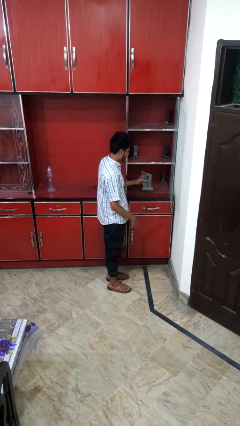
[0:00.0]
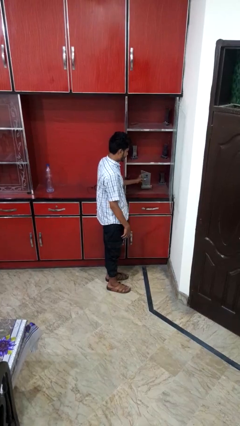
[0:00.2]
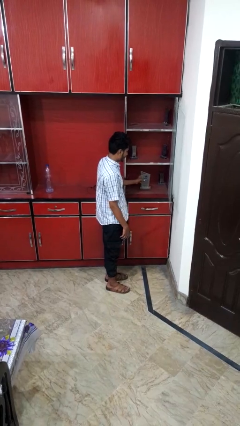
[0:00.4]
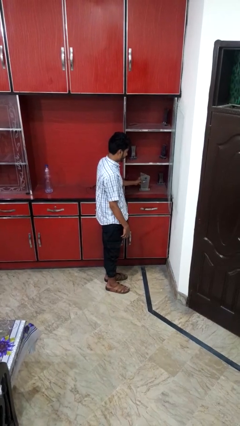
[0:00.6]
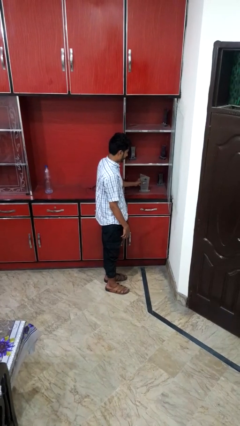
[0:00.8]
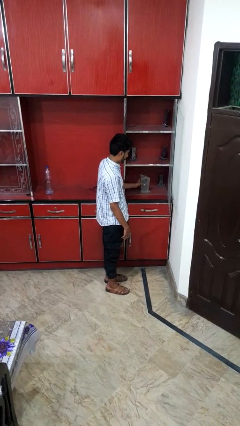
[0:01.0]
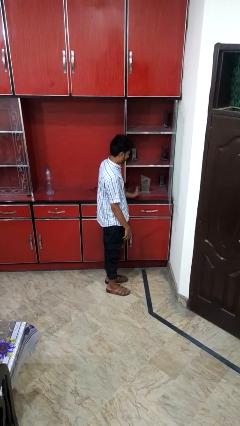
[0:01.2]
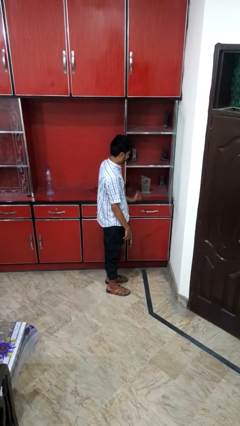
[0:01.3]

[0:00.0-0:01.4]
person puts down object into cabinet

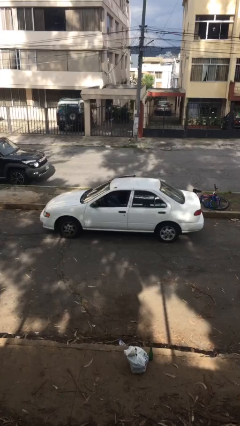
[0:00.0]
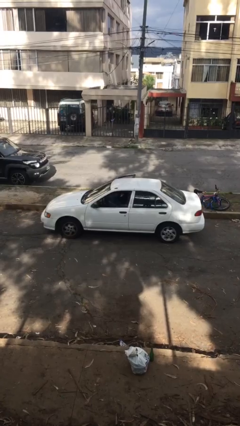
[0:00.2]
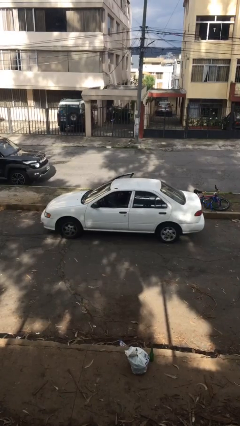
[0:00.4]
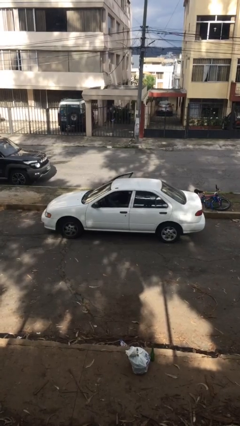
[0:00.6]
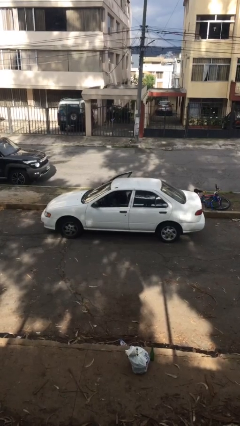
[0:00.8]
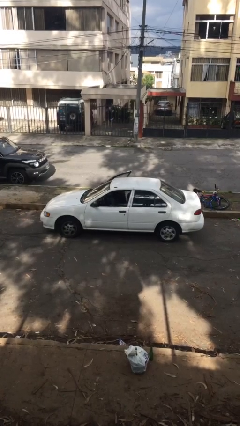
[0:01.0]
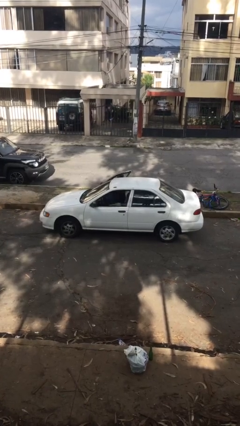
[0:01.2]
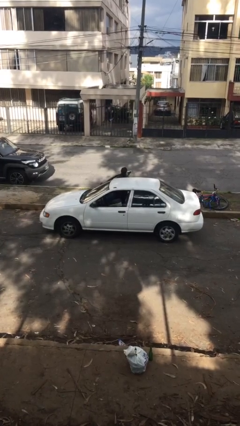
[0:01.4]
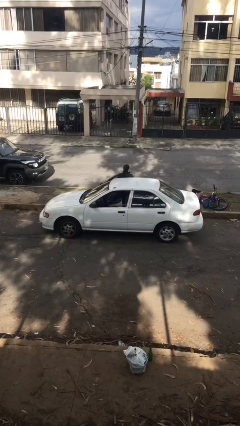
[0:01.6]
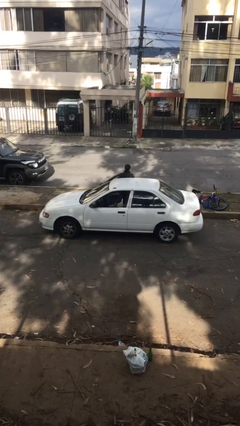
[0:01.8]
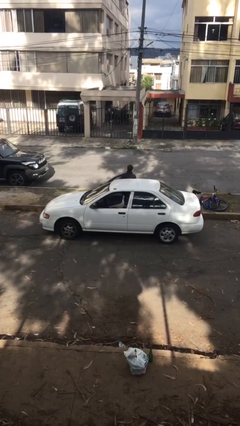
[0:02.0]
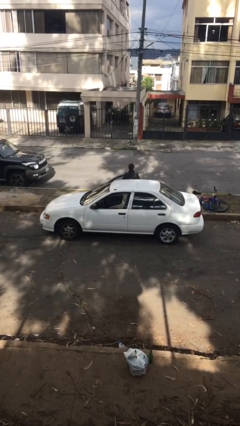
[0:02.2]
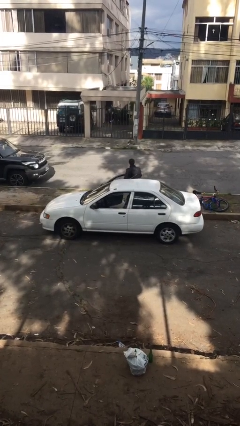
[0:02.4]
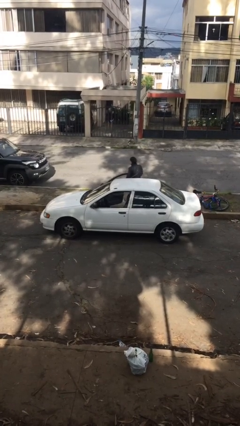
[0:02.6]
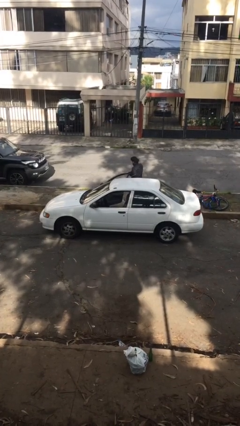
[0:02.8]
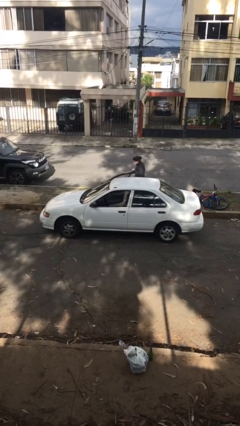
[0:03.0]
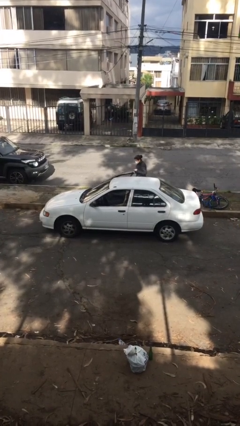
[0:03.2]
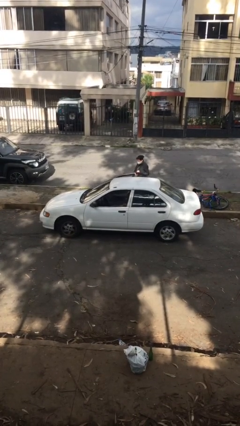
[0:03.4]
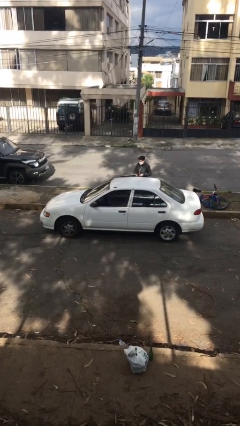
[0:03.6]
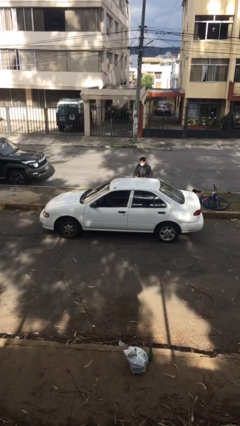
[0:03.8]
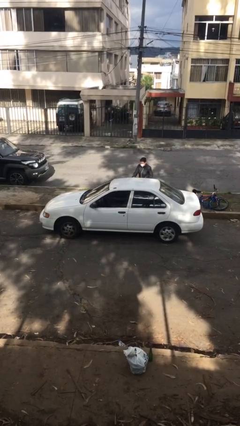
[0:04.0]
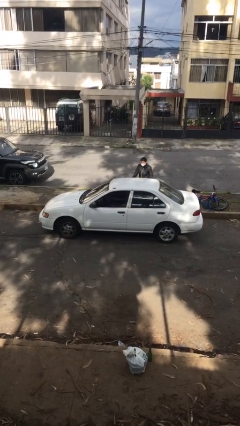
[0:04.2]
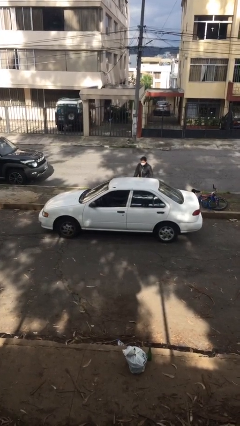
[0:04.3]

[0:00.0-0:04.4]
car drops off person

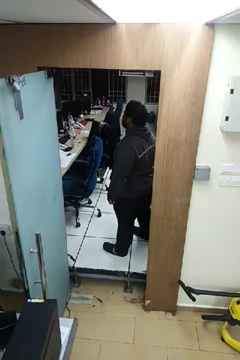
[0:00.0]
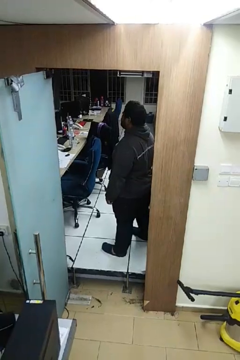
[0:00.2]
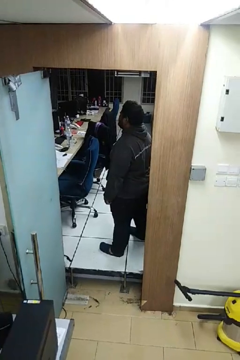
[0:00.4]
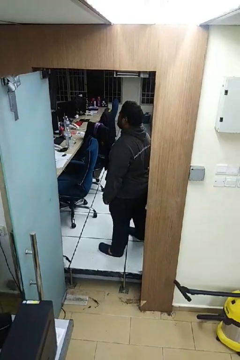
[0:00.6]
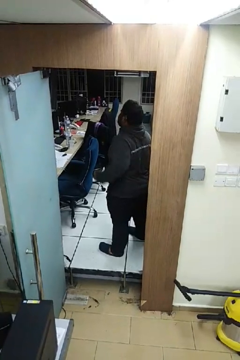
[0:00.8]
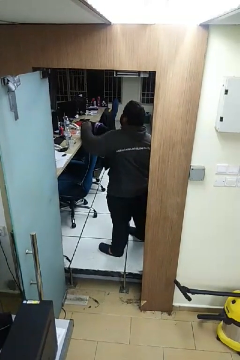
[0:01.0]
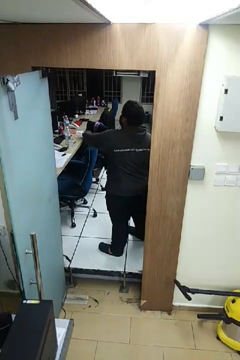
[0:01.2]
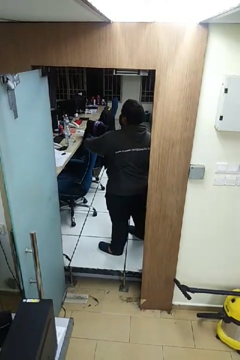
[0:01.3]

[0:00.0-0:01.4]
person punches

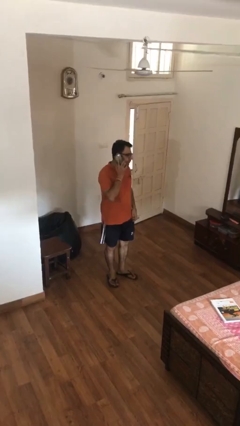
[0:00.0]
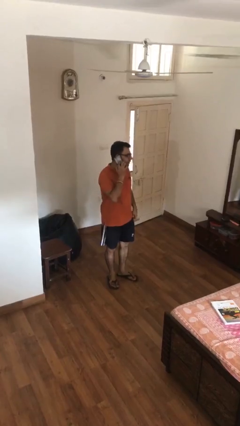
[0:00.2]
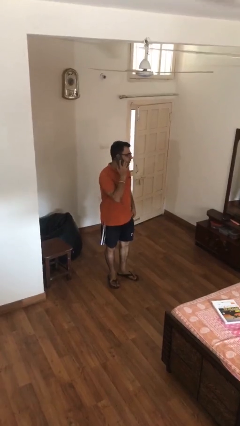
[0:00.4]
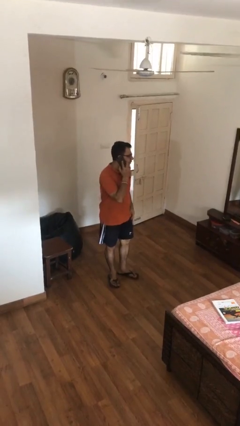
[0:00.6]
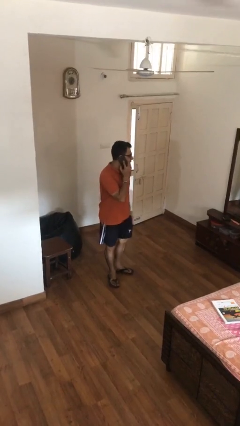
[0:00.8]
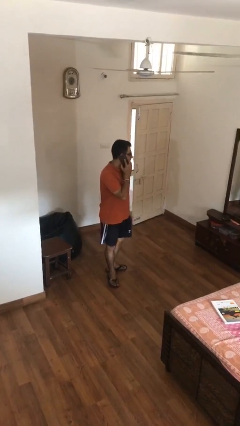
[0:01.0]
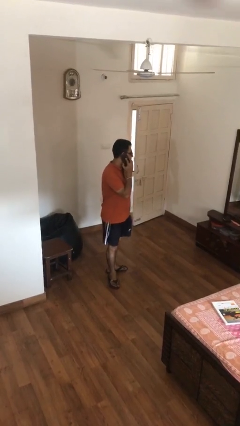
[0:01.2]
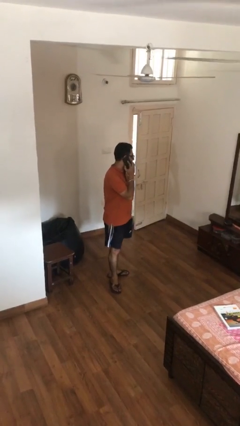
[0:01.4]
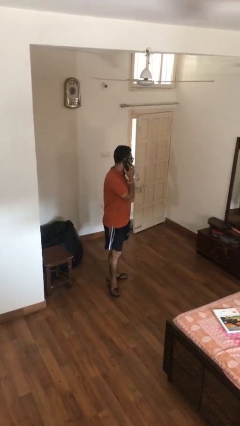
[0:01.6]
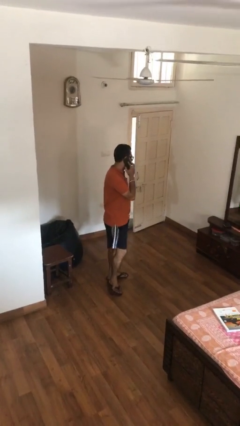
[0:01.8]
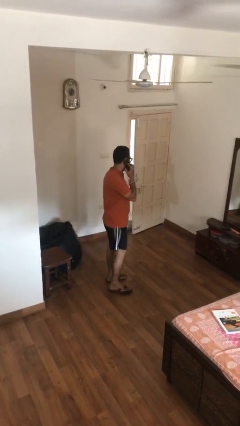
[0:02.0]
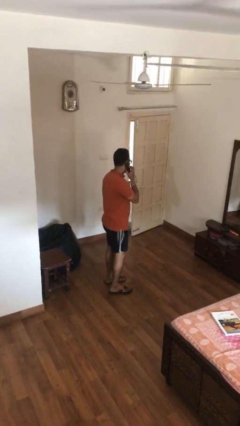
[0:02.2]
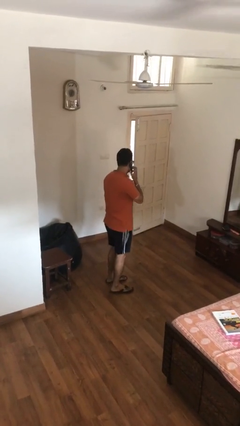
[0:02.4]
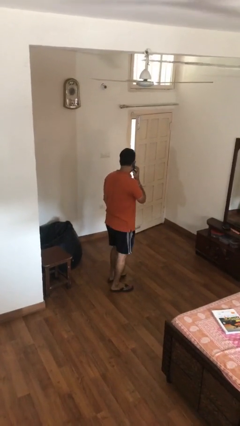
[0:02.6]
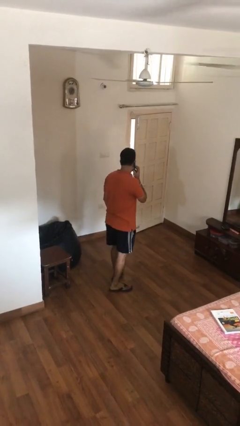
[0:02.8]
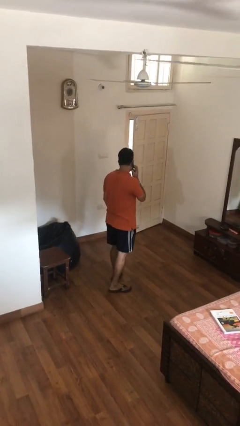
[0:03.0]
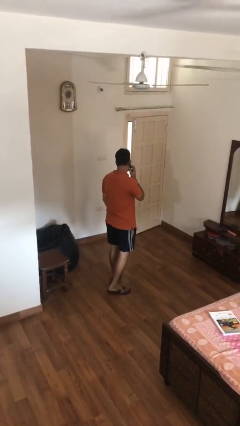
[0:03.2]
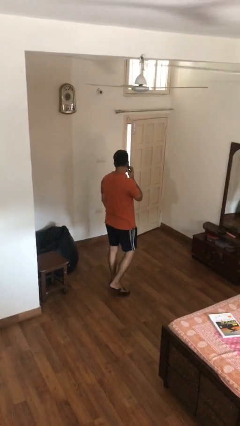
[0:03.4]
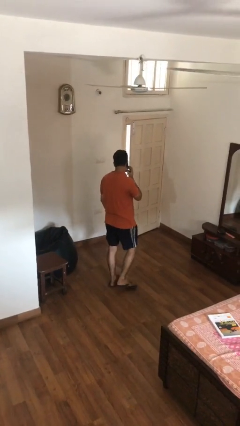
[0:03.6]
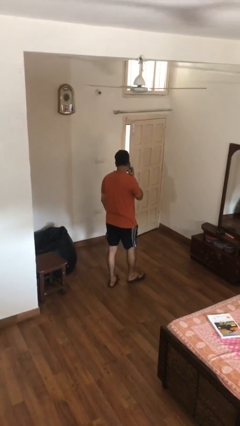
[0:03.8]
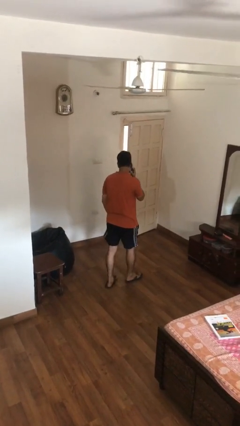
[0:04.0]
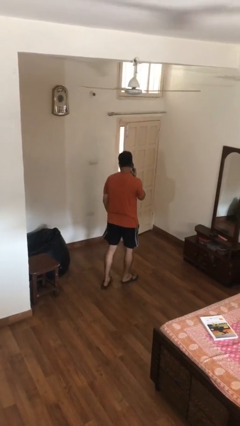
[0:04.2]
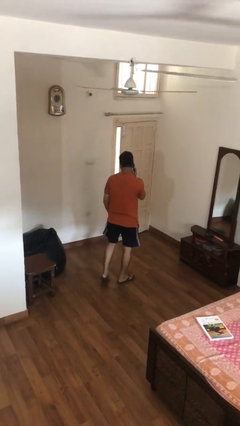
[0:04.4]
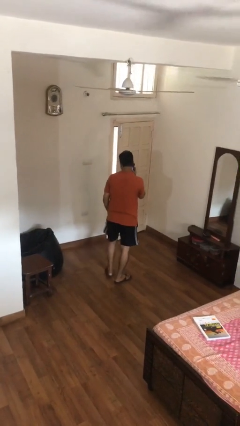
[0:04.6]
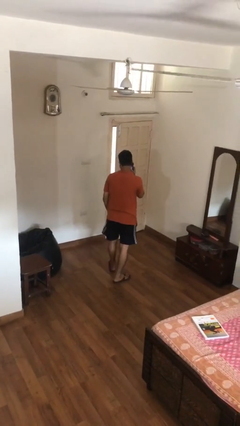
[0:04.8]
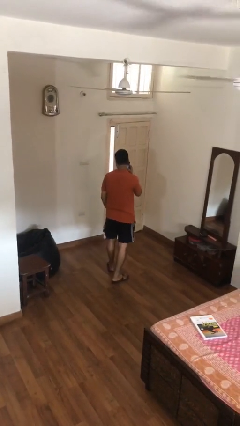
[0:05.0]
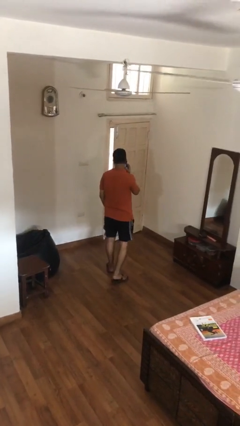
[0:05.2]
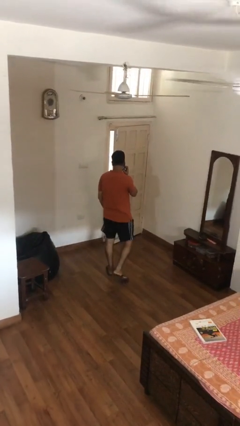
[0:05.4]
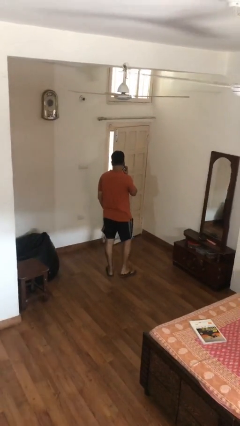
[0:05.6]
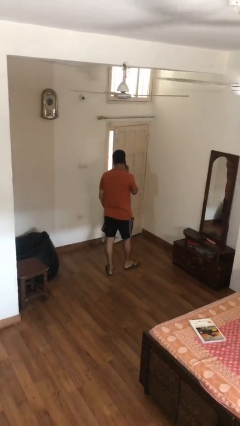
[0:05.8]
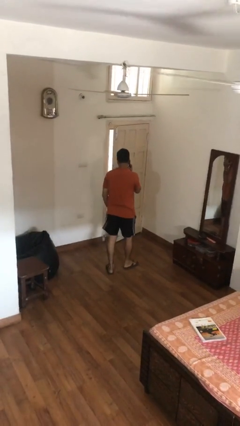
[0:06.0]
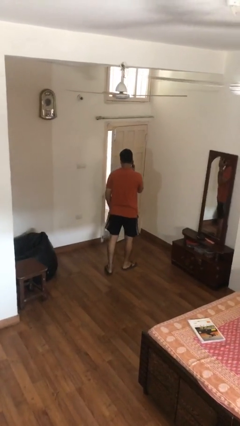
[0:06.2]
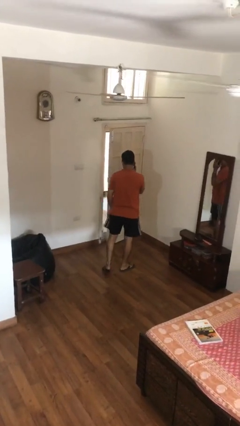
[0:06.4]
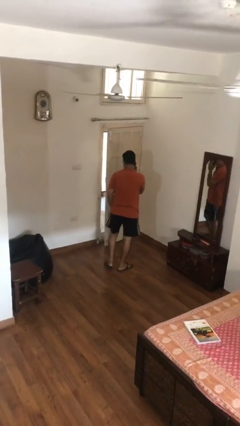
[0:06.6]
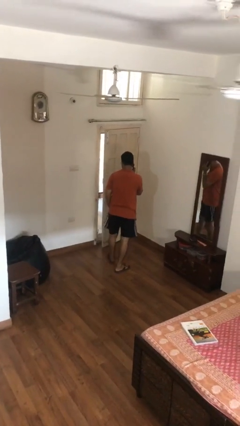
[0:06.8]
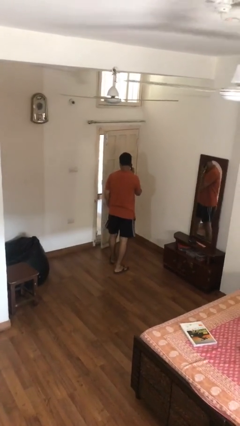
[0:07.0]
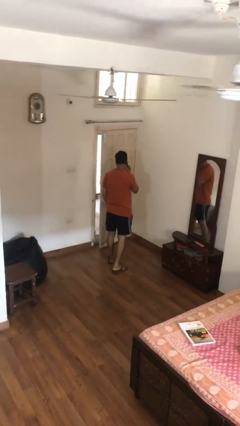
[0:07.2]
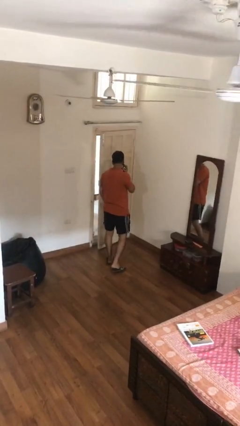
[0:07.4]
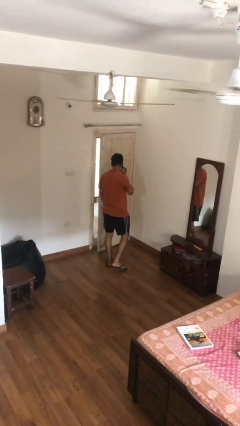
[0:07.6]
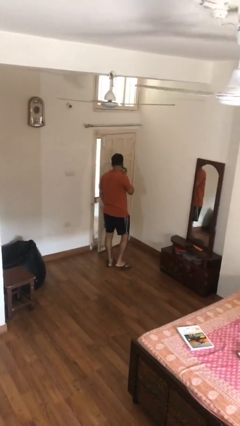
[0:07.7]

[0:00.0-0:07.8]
person talks on phone

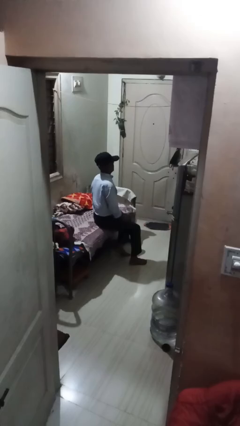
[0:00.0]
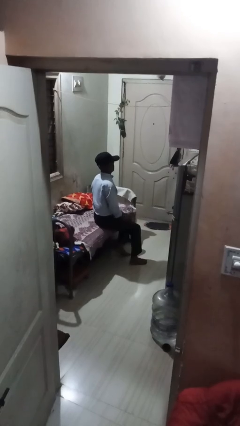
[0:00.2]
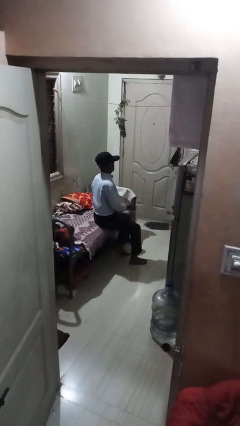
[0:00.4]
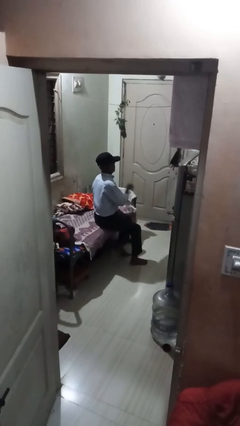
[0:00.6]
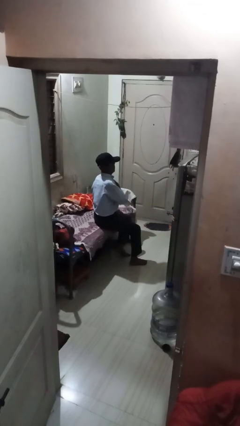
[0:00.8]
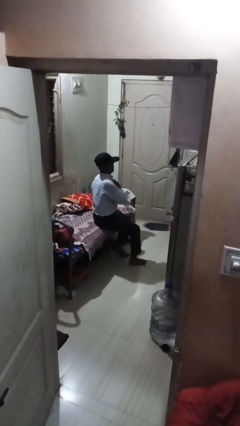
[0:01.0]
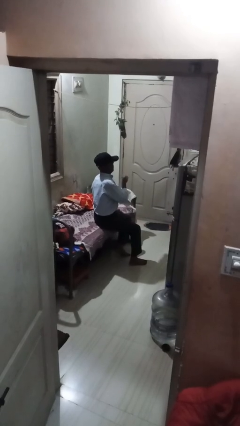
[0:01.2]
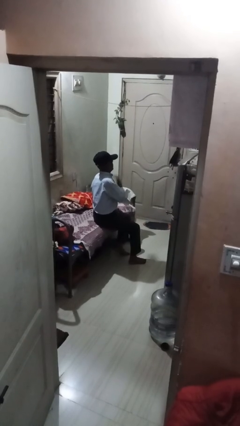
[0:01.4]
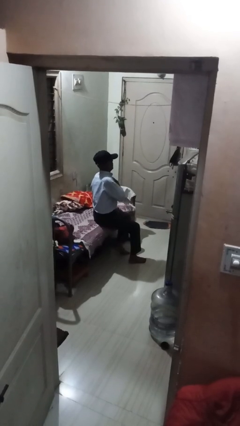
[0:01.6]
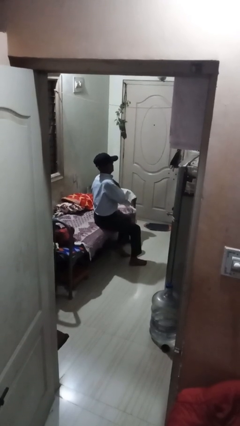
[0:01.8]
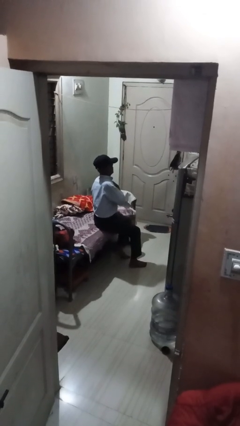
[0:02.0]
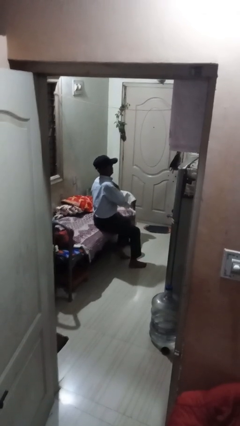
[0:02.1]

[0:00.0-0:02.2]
person drums on chest

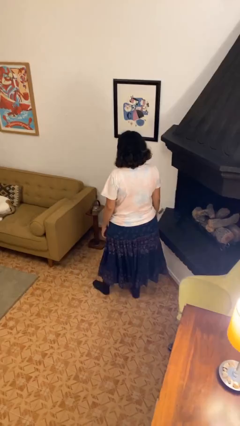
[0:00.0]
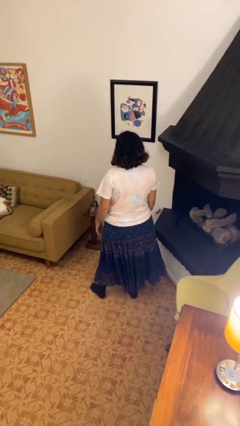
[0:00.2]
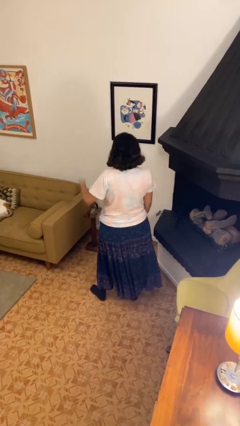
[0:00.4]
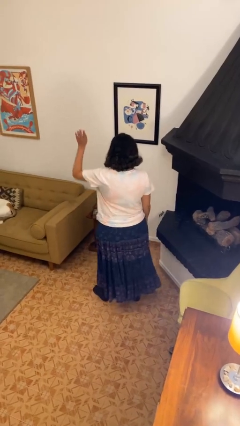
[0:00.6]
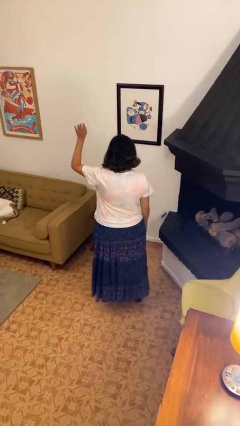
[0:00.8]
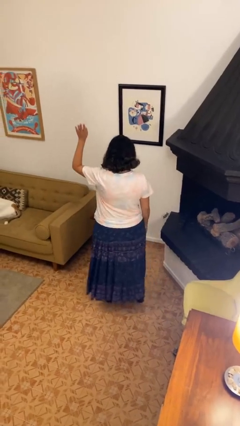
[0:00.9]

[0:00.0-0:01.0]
person gestures raise hand
